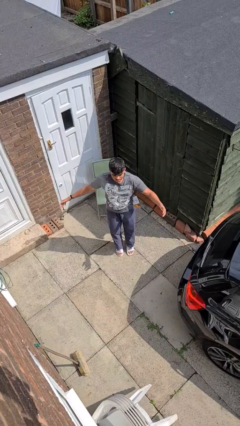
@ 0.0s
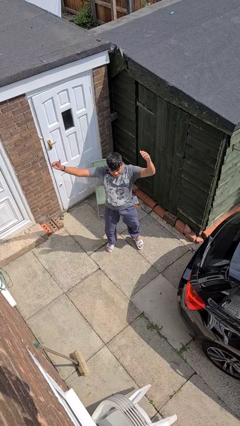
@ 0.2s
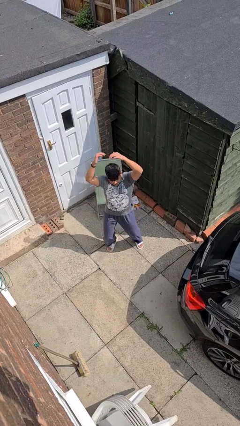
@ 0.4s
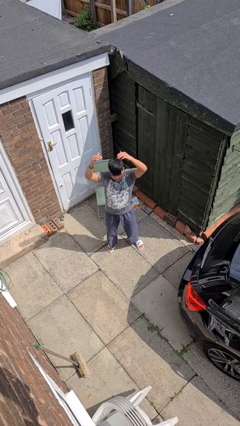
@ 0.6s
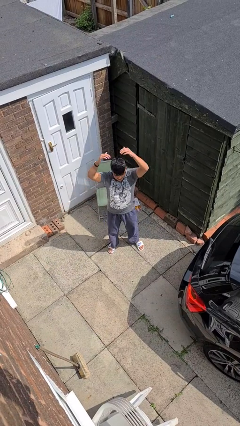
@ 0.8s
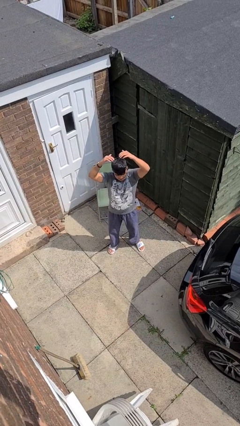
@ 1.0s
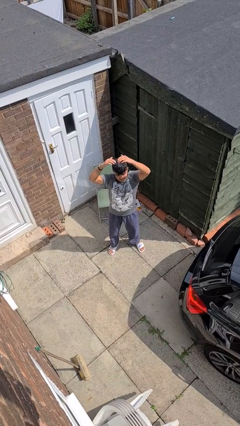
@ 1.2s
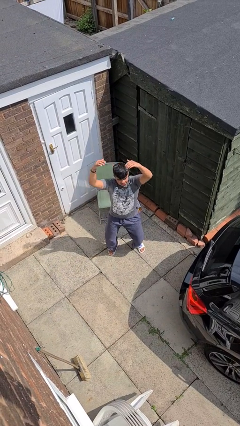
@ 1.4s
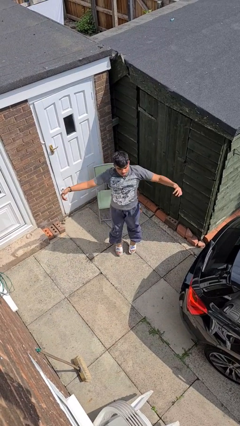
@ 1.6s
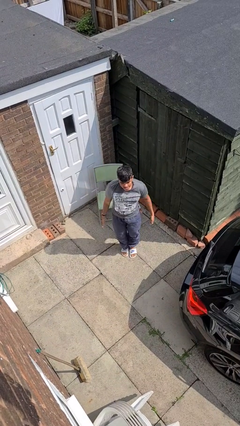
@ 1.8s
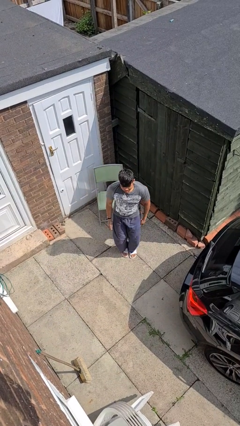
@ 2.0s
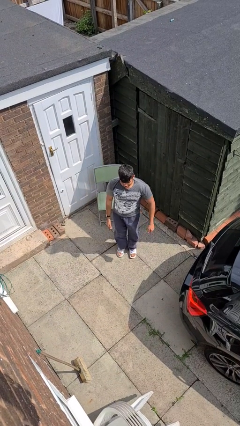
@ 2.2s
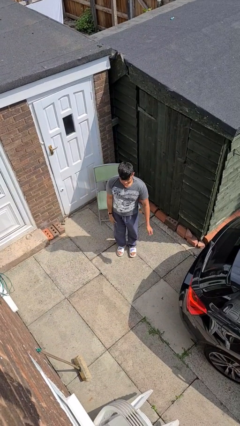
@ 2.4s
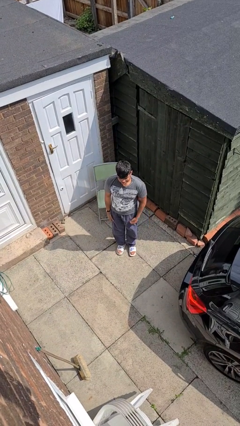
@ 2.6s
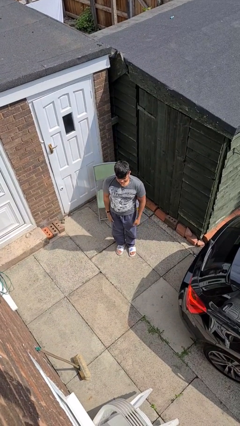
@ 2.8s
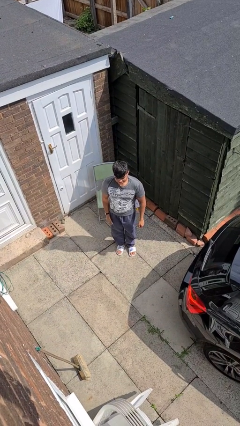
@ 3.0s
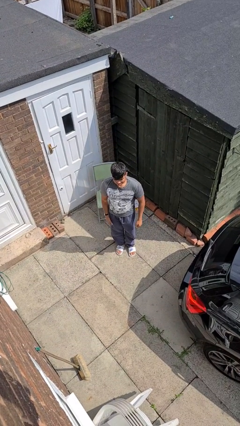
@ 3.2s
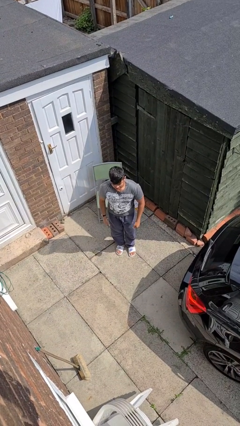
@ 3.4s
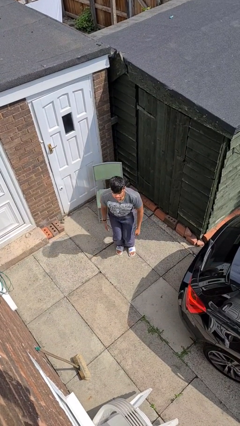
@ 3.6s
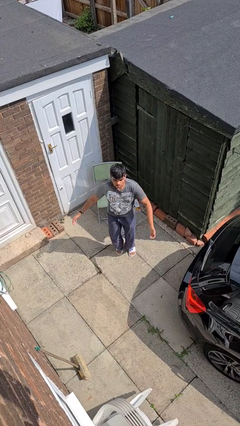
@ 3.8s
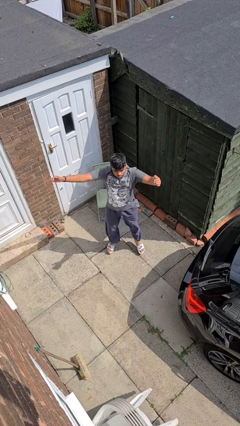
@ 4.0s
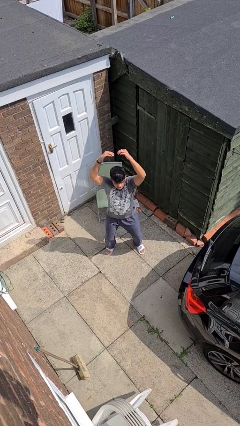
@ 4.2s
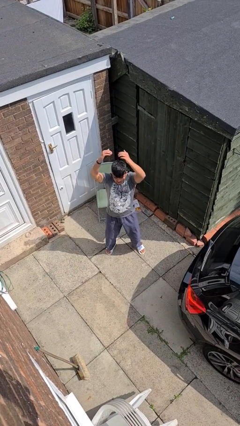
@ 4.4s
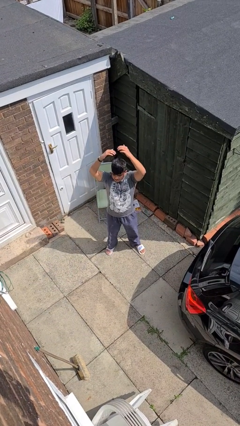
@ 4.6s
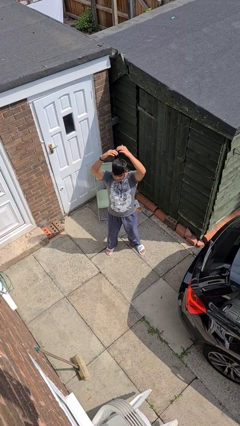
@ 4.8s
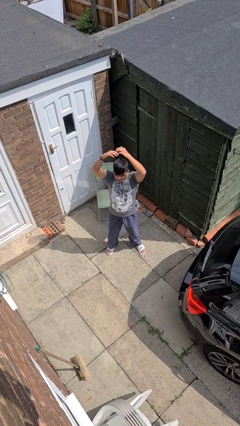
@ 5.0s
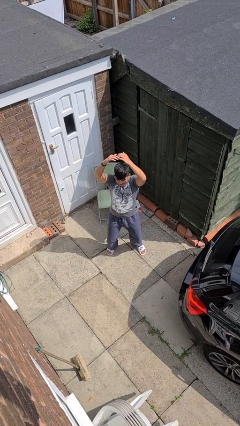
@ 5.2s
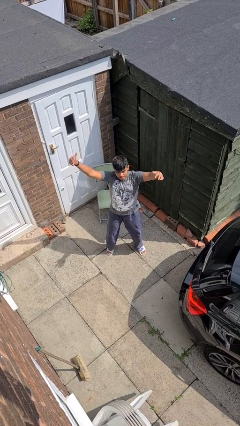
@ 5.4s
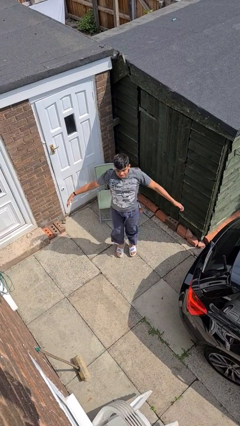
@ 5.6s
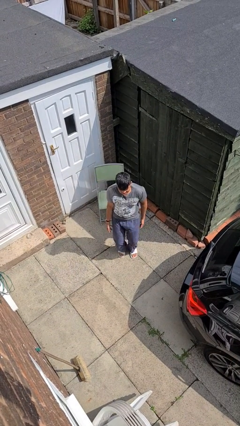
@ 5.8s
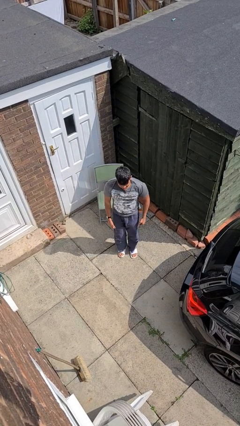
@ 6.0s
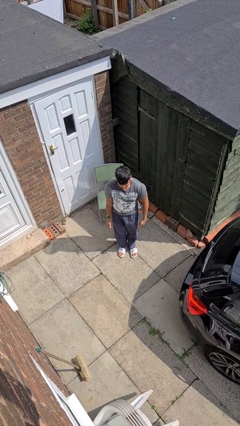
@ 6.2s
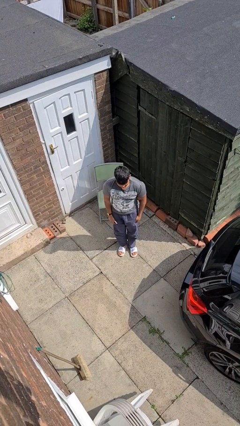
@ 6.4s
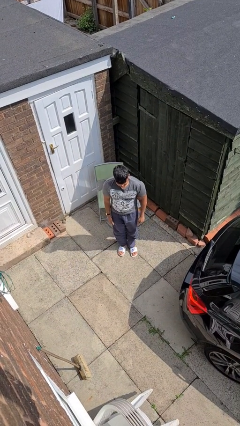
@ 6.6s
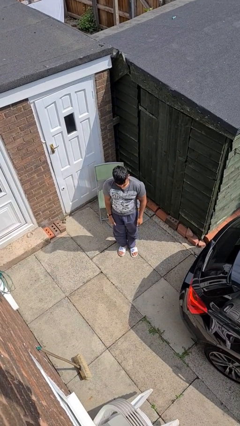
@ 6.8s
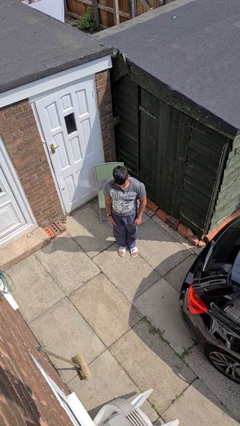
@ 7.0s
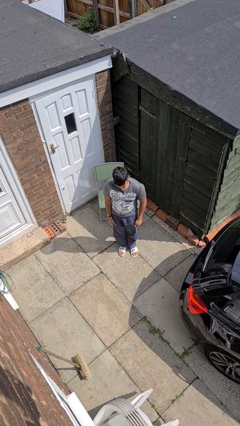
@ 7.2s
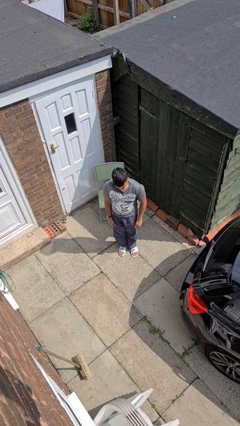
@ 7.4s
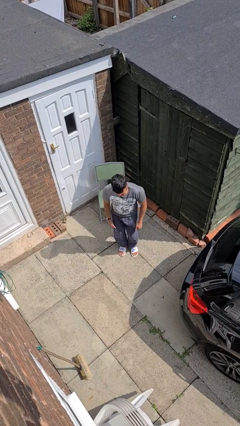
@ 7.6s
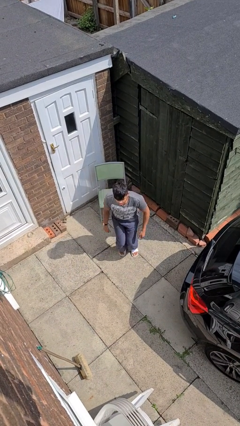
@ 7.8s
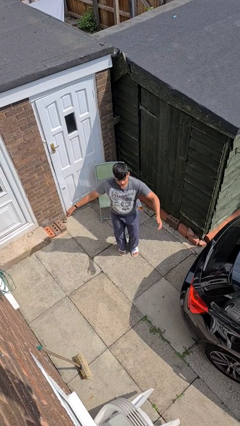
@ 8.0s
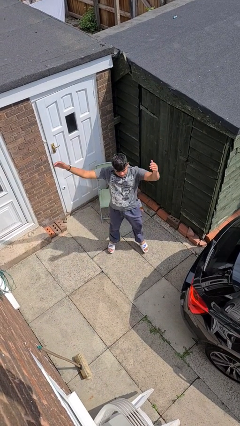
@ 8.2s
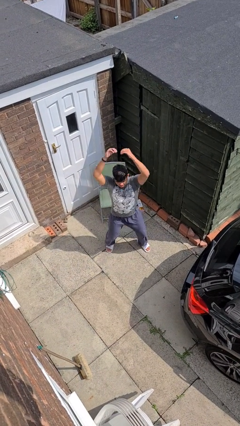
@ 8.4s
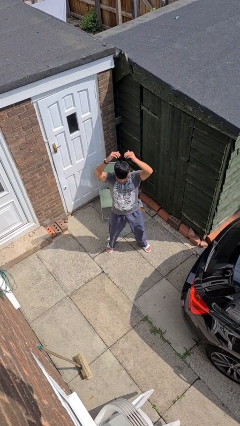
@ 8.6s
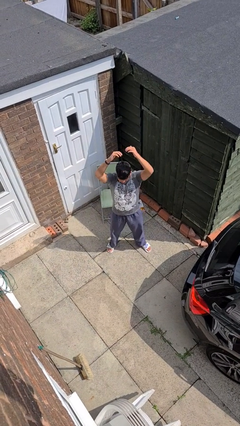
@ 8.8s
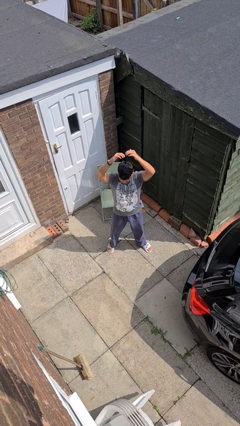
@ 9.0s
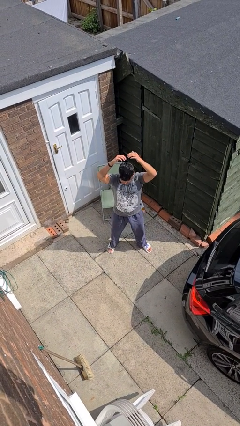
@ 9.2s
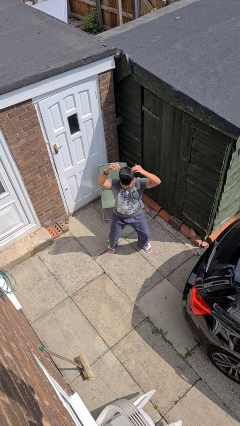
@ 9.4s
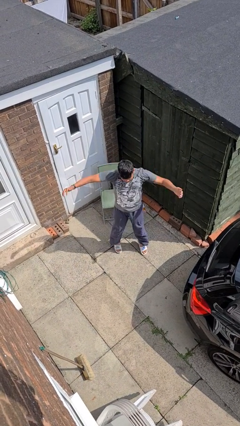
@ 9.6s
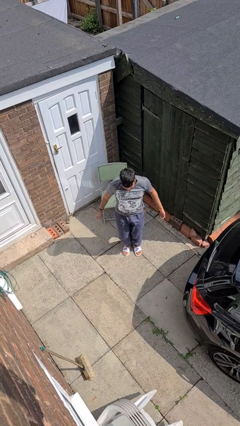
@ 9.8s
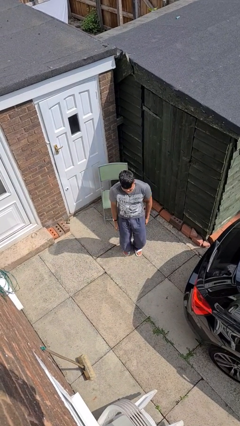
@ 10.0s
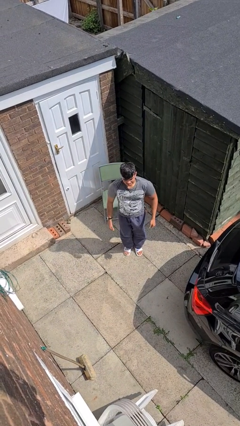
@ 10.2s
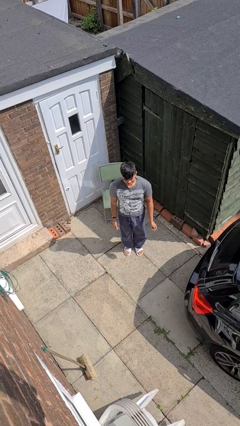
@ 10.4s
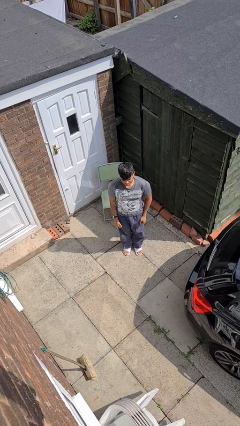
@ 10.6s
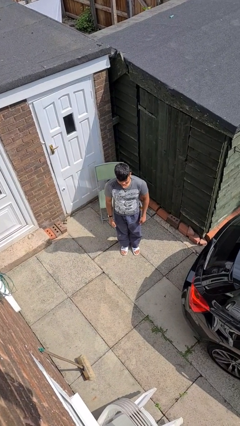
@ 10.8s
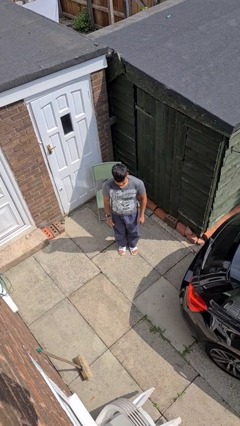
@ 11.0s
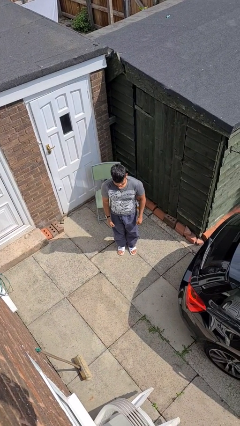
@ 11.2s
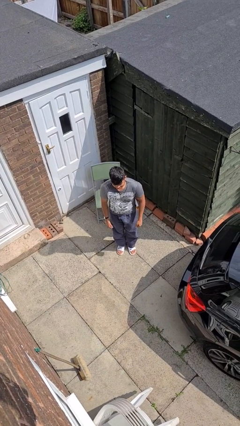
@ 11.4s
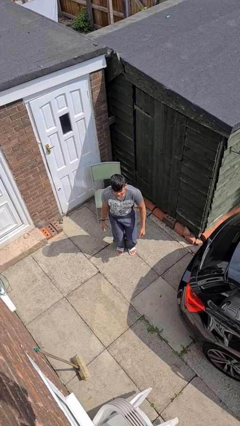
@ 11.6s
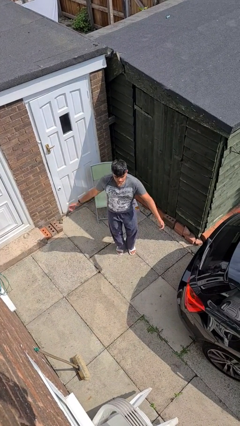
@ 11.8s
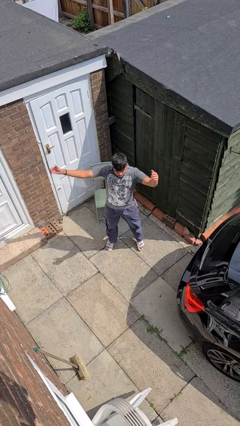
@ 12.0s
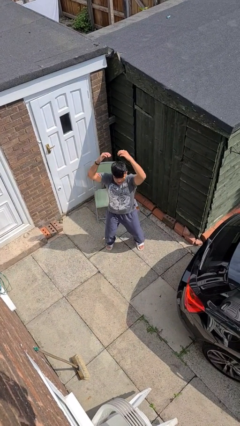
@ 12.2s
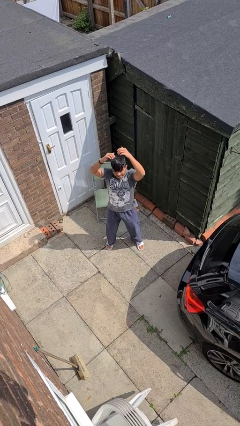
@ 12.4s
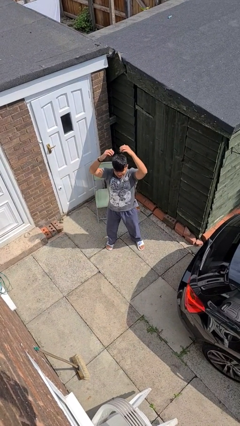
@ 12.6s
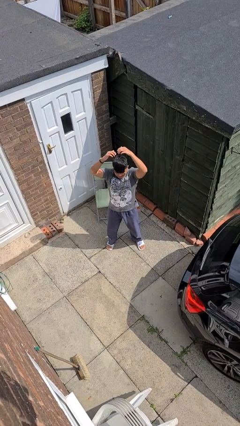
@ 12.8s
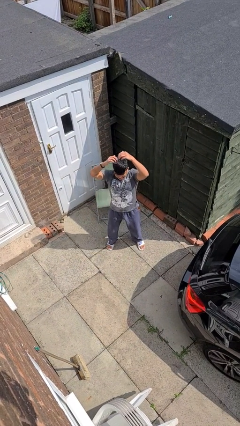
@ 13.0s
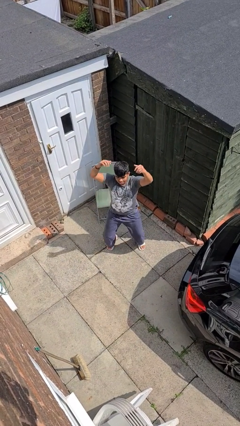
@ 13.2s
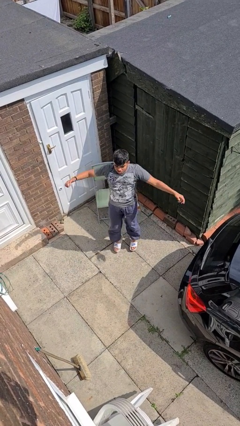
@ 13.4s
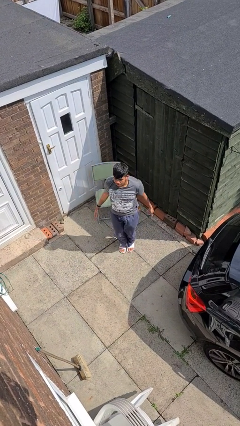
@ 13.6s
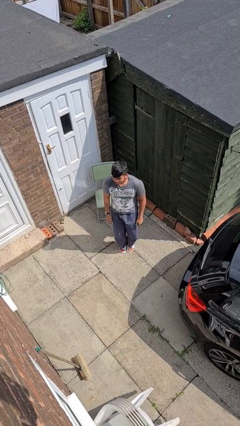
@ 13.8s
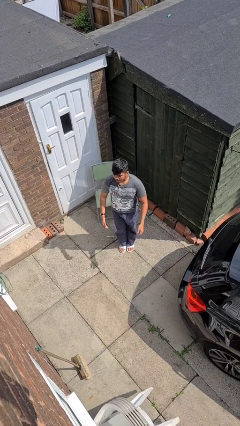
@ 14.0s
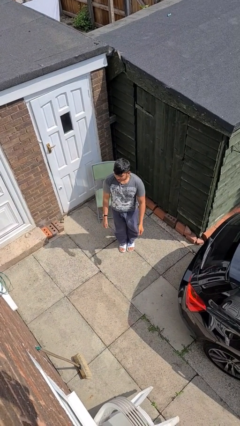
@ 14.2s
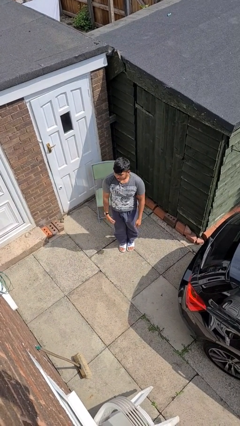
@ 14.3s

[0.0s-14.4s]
person exercises with jumping jacks

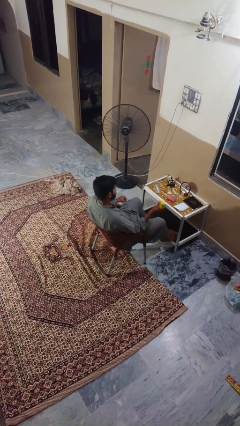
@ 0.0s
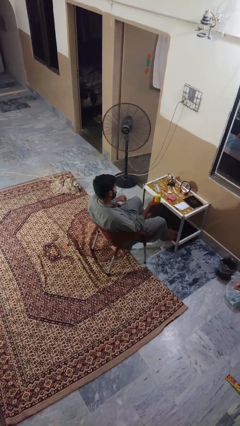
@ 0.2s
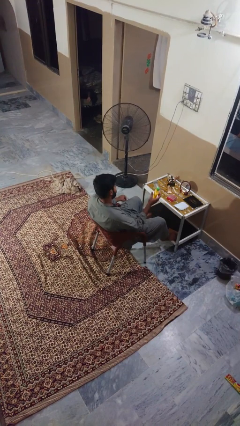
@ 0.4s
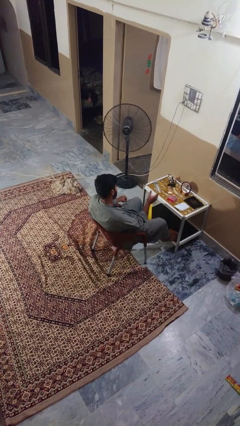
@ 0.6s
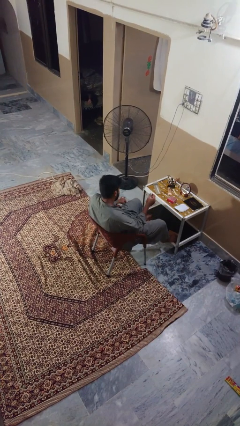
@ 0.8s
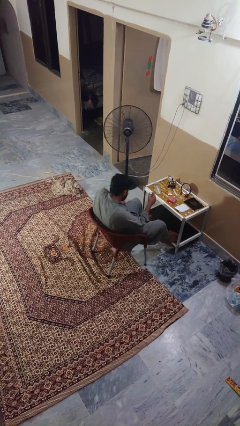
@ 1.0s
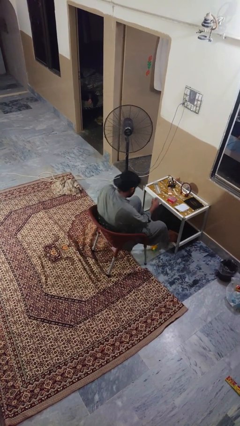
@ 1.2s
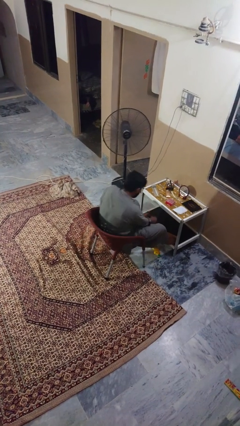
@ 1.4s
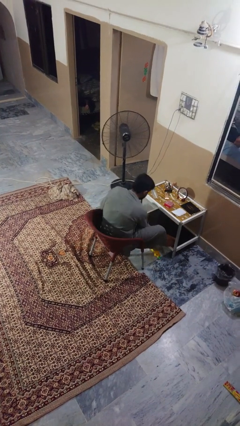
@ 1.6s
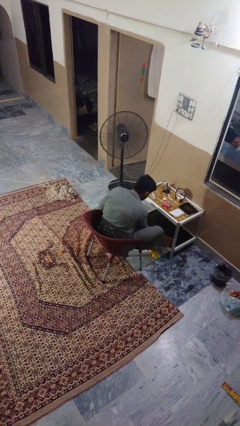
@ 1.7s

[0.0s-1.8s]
person throws object to ground

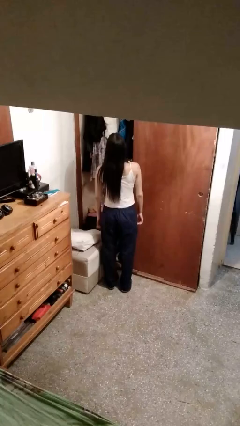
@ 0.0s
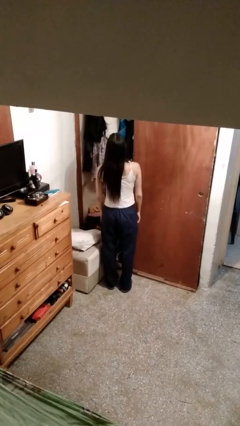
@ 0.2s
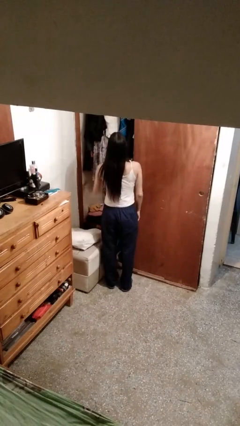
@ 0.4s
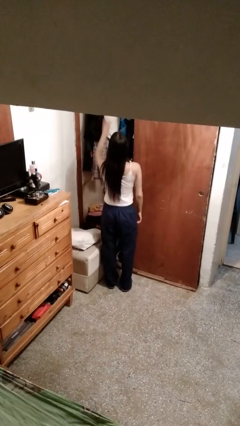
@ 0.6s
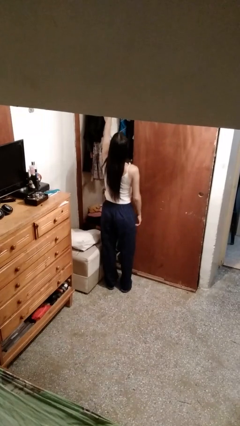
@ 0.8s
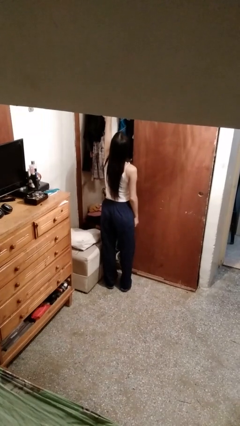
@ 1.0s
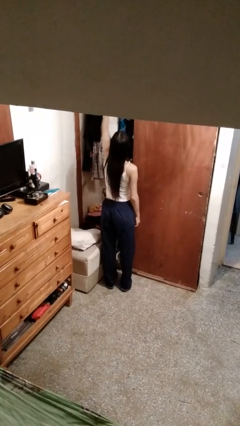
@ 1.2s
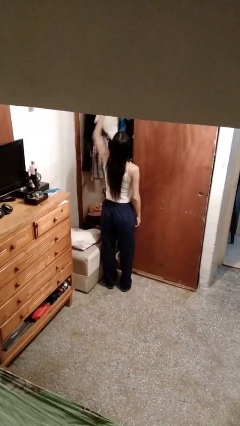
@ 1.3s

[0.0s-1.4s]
person takes clothes from closet

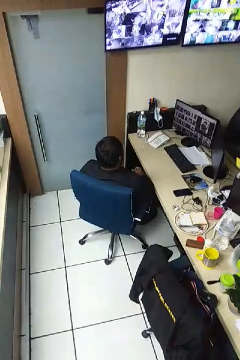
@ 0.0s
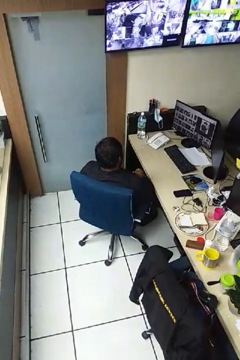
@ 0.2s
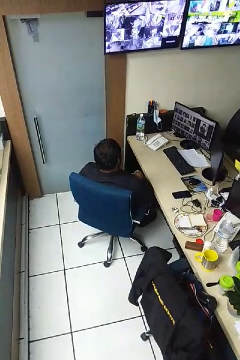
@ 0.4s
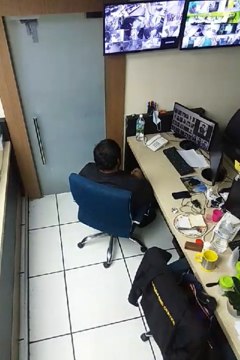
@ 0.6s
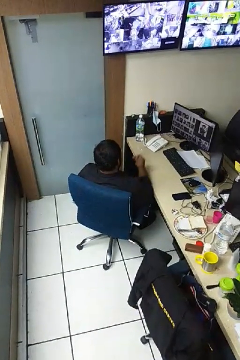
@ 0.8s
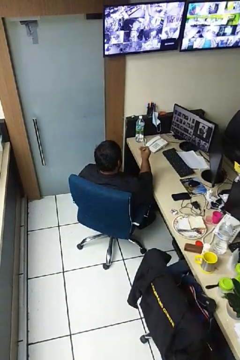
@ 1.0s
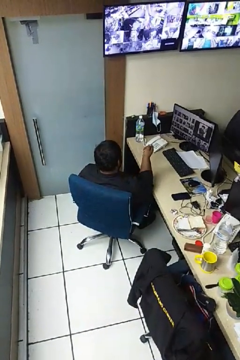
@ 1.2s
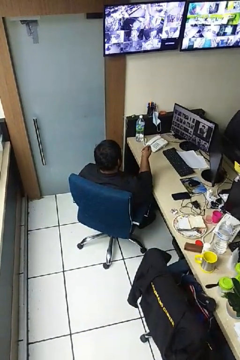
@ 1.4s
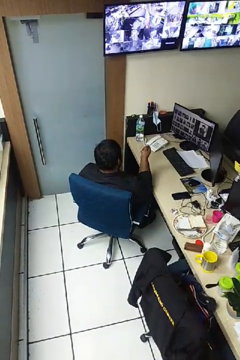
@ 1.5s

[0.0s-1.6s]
person snaps fingers
